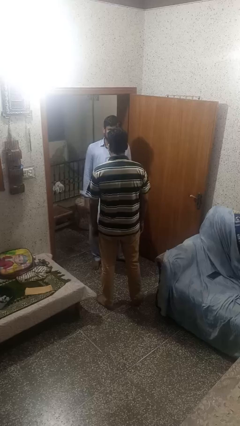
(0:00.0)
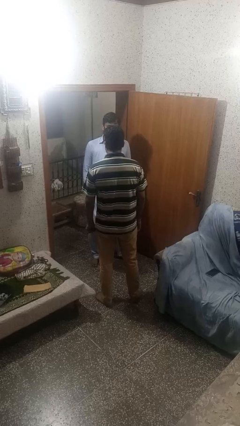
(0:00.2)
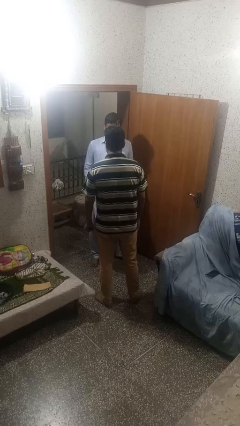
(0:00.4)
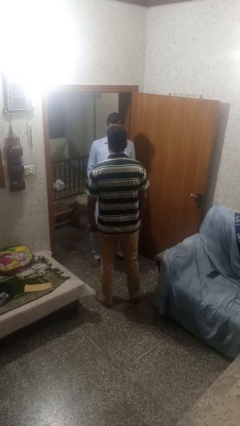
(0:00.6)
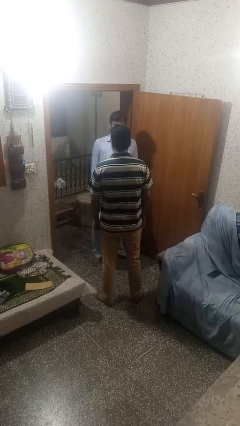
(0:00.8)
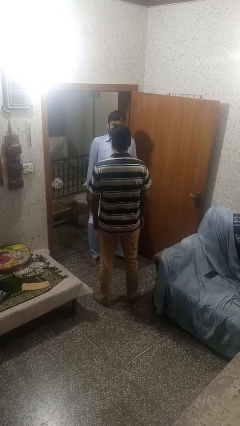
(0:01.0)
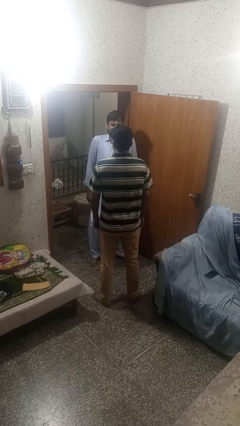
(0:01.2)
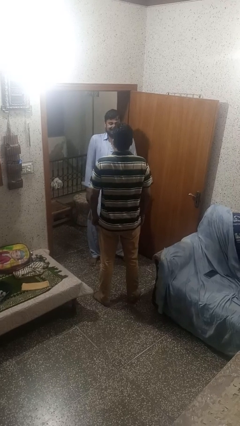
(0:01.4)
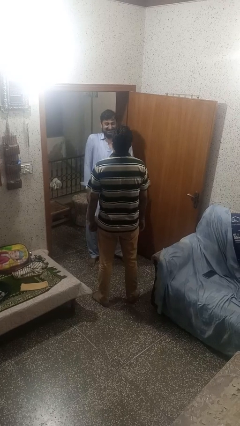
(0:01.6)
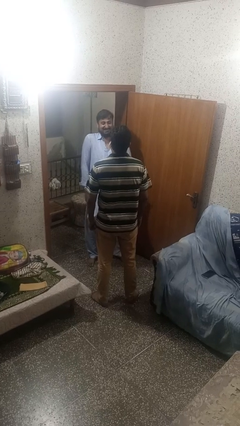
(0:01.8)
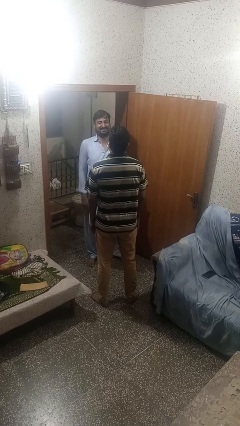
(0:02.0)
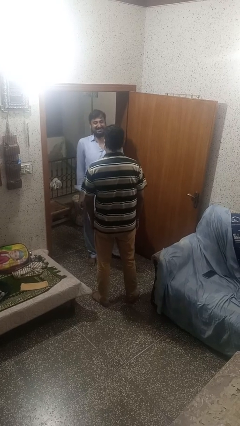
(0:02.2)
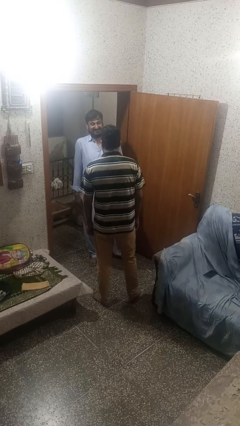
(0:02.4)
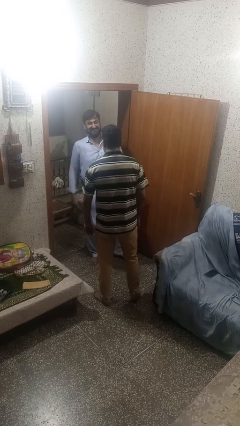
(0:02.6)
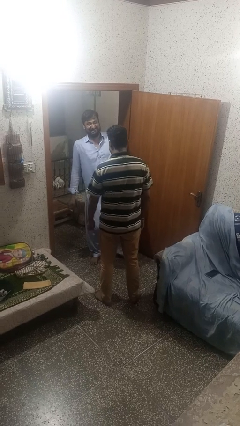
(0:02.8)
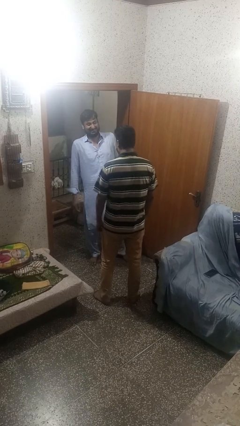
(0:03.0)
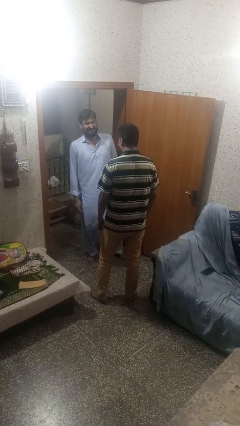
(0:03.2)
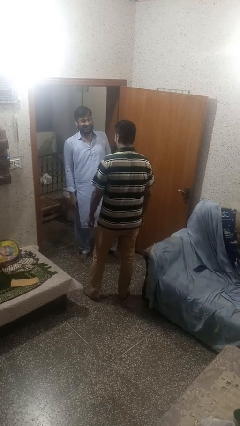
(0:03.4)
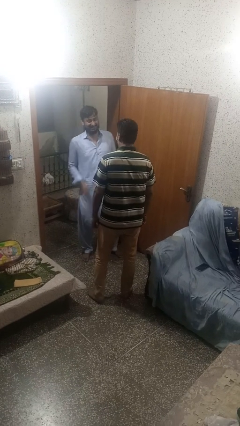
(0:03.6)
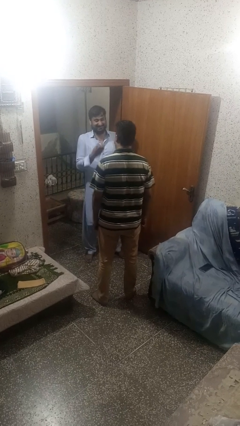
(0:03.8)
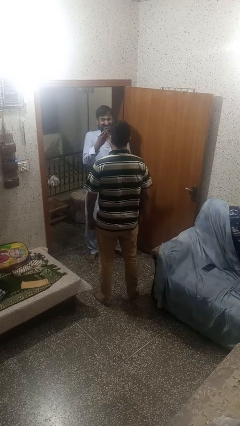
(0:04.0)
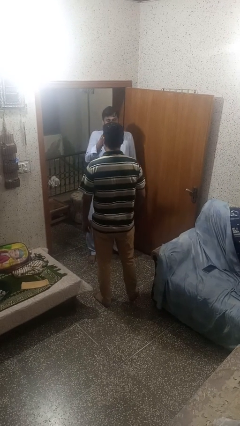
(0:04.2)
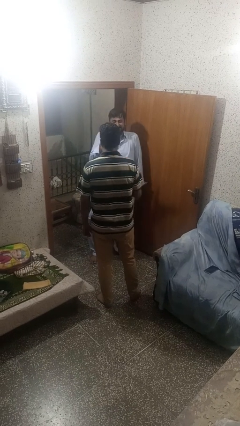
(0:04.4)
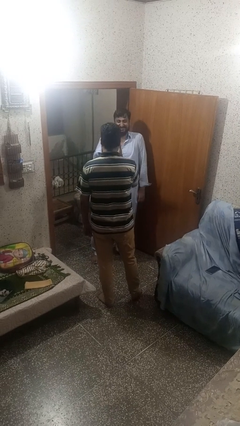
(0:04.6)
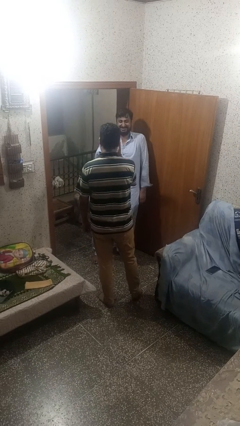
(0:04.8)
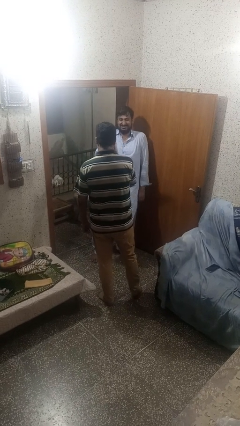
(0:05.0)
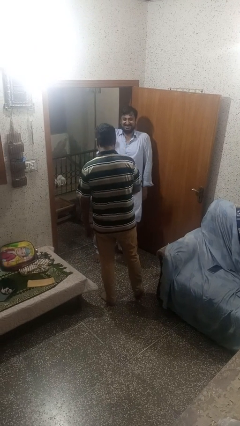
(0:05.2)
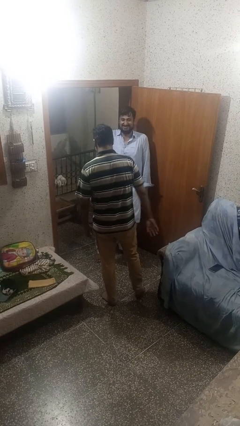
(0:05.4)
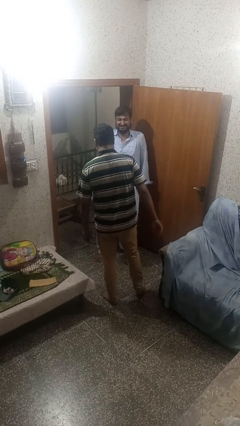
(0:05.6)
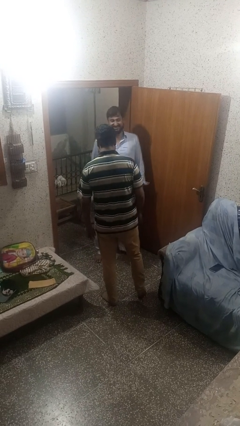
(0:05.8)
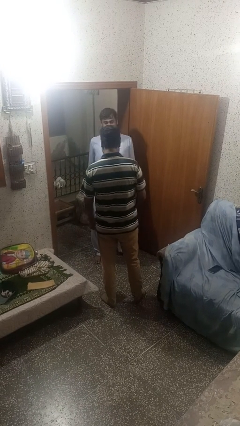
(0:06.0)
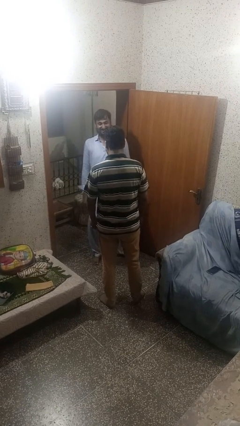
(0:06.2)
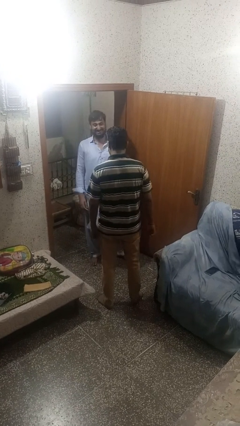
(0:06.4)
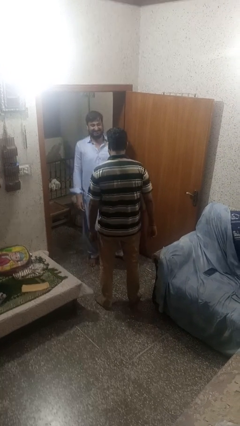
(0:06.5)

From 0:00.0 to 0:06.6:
person laughs with person

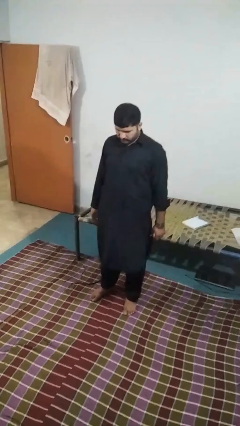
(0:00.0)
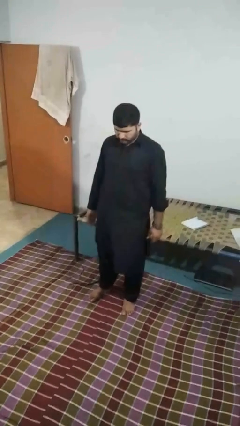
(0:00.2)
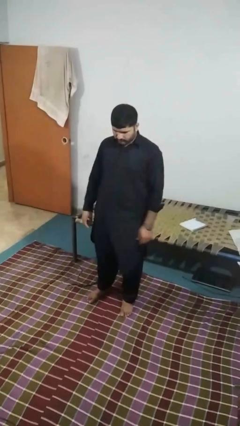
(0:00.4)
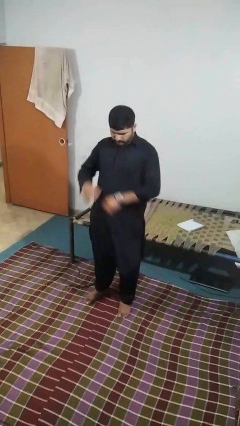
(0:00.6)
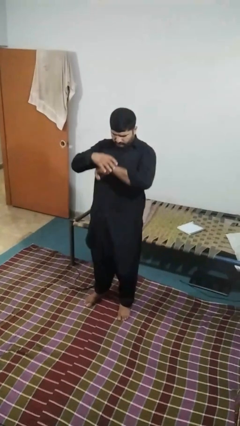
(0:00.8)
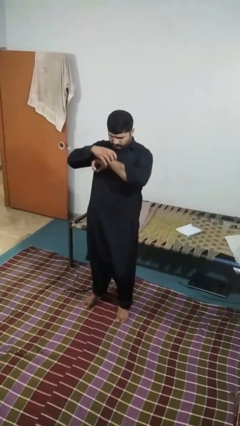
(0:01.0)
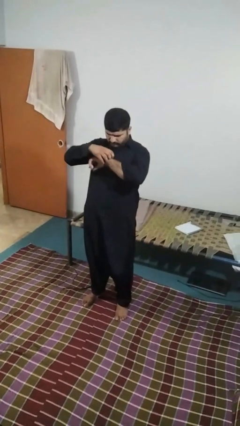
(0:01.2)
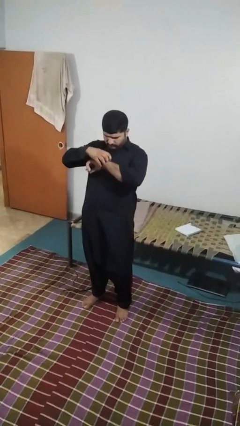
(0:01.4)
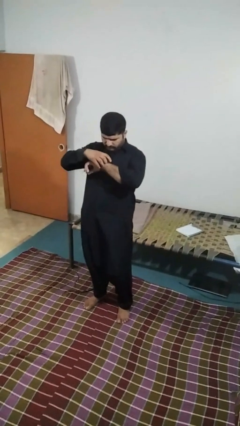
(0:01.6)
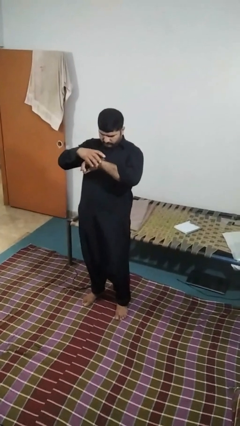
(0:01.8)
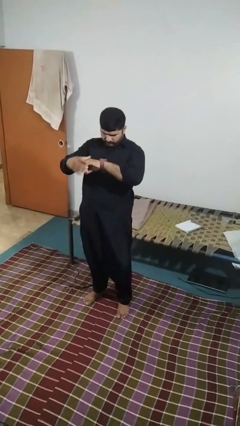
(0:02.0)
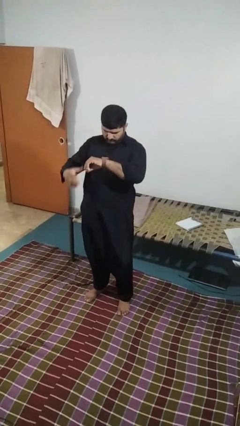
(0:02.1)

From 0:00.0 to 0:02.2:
person looks at wristwatch

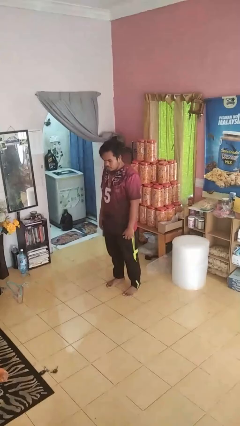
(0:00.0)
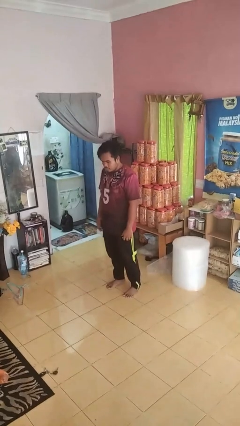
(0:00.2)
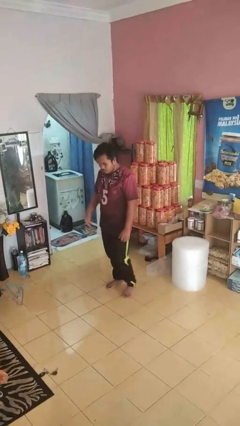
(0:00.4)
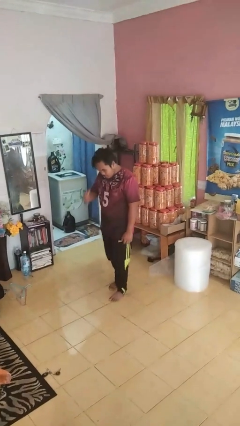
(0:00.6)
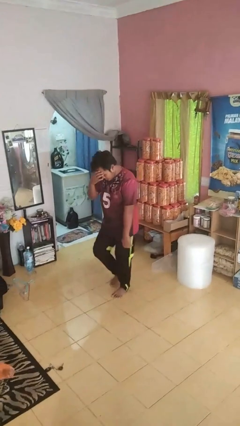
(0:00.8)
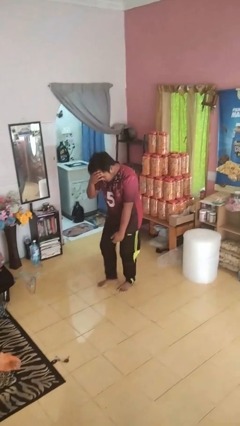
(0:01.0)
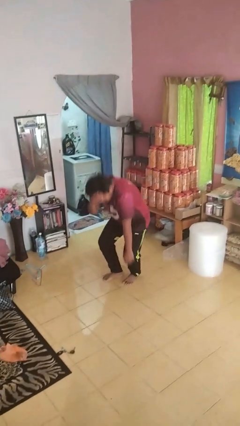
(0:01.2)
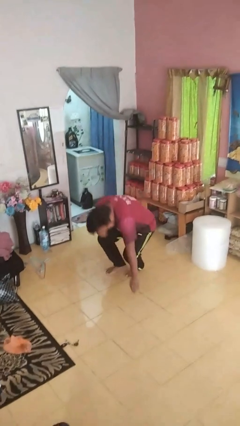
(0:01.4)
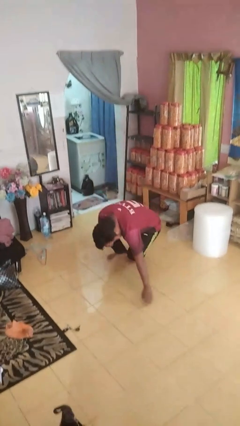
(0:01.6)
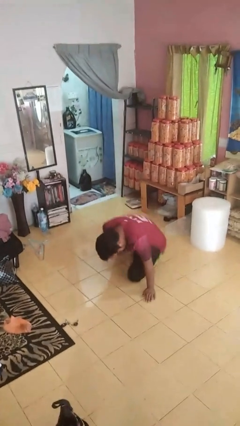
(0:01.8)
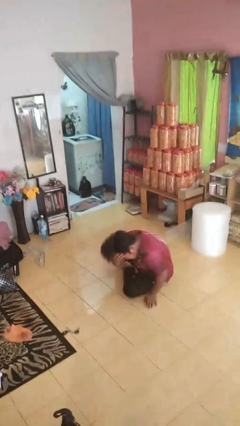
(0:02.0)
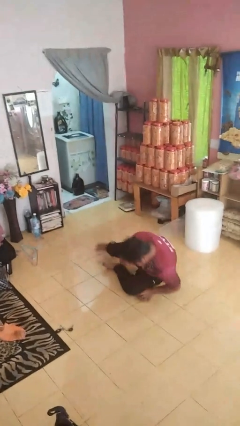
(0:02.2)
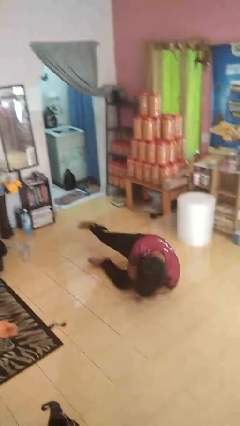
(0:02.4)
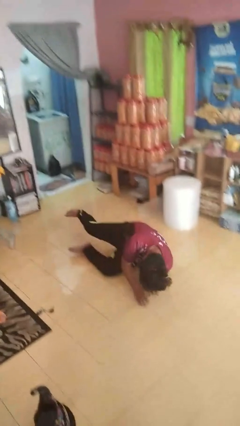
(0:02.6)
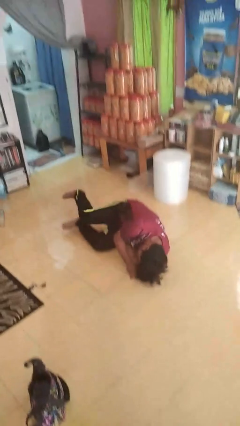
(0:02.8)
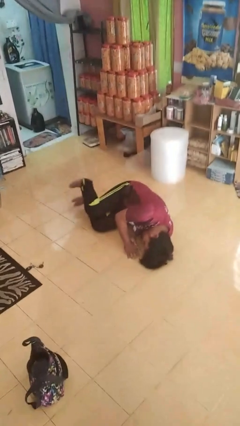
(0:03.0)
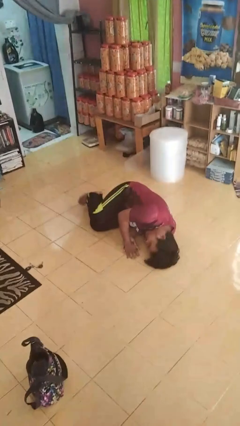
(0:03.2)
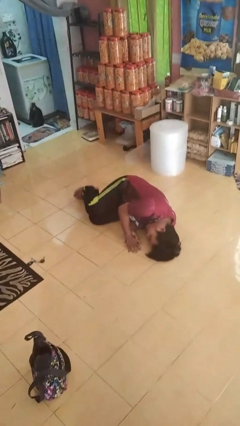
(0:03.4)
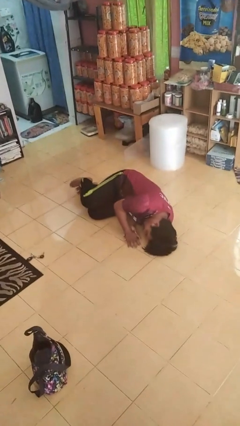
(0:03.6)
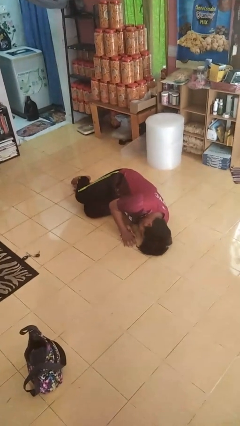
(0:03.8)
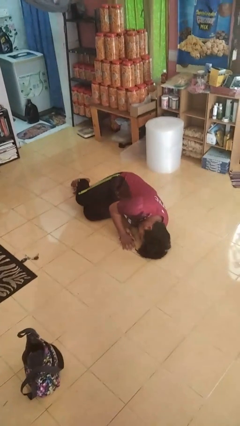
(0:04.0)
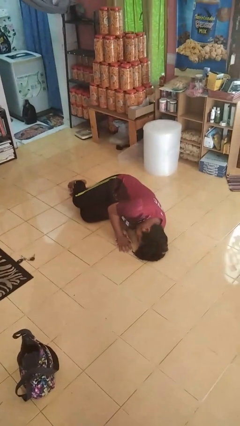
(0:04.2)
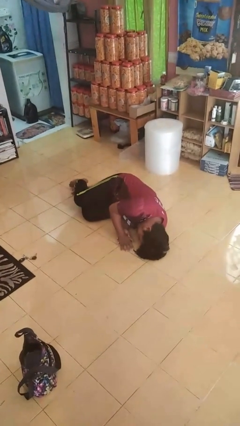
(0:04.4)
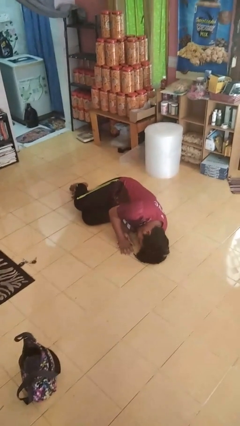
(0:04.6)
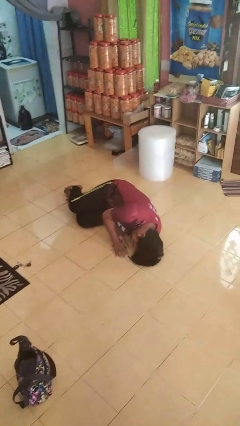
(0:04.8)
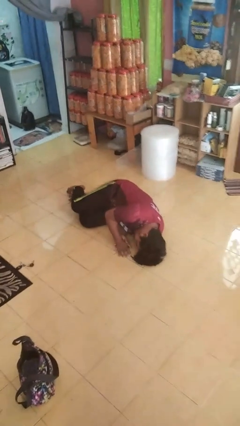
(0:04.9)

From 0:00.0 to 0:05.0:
person falls while standing

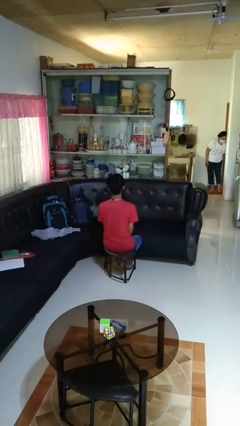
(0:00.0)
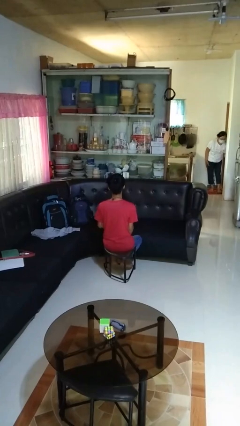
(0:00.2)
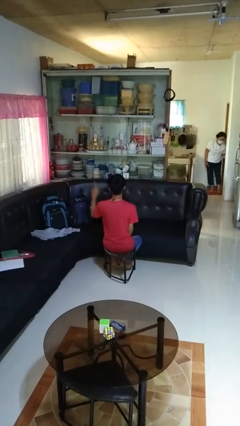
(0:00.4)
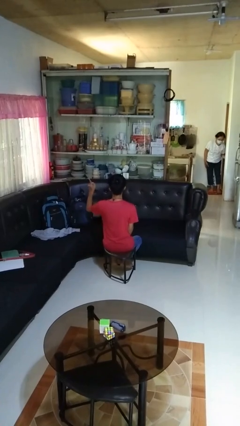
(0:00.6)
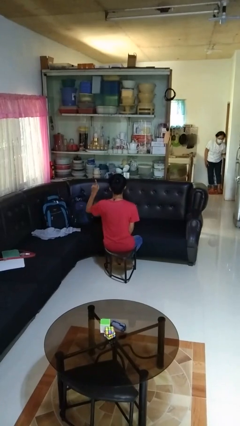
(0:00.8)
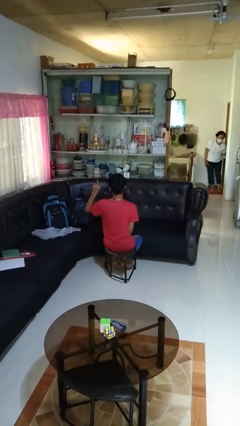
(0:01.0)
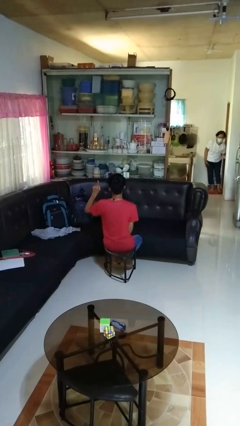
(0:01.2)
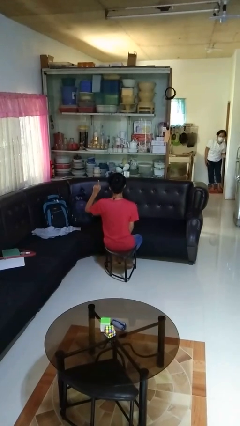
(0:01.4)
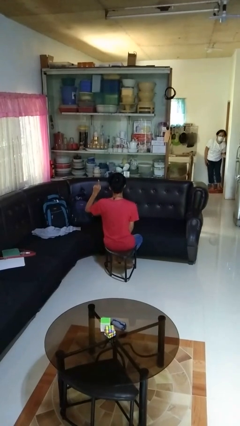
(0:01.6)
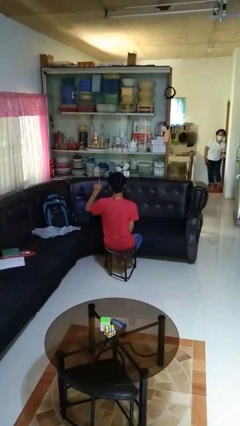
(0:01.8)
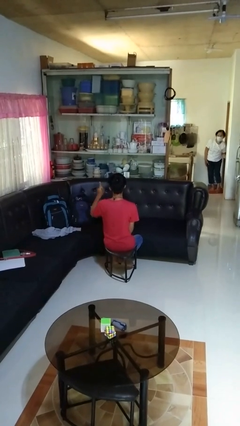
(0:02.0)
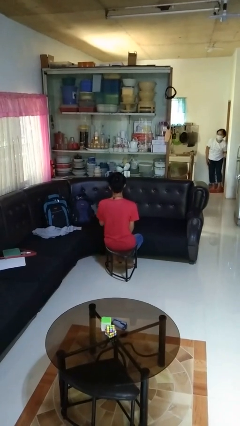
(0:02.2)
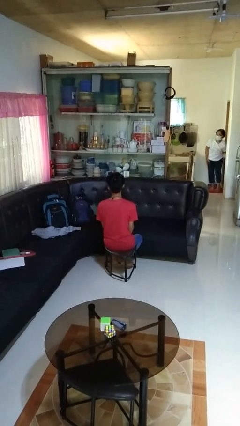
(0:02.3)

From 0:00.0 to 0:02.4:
person gestures number one

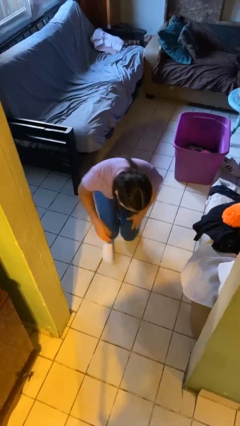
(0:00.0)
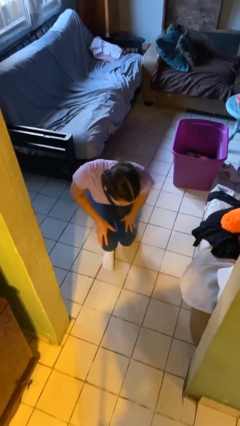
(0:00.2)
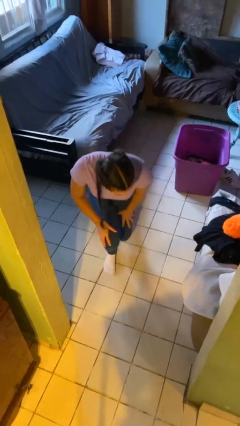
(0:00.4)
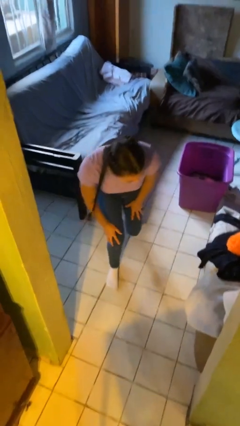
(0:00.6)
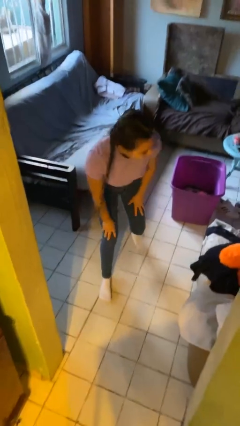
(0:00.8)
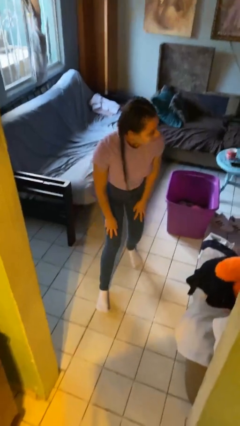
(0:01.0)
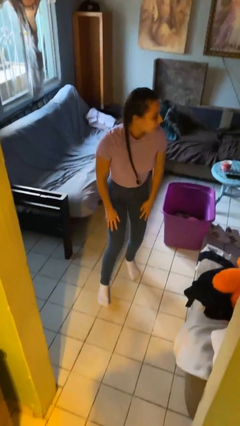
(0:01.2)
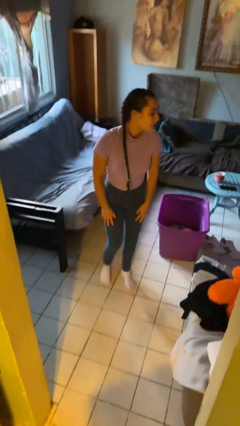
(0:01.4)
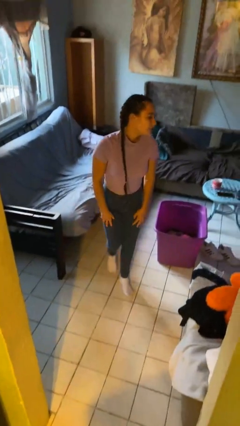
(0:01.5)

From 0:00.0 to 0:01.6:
person stands up from floor
